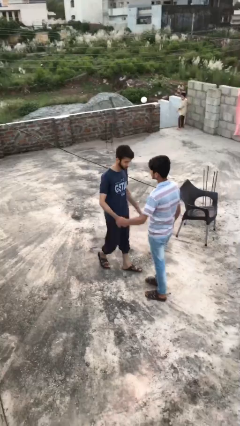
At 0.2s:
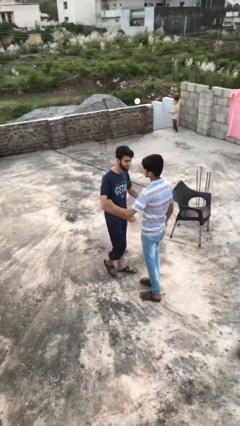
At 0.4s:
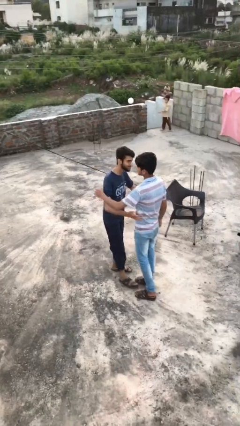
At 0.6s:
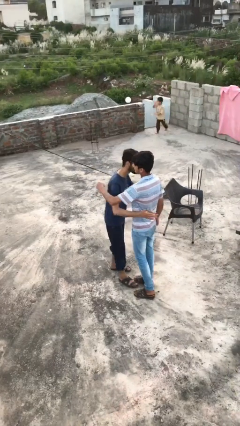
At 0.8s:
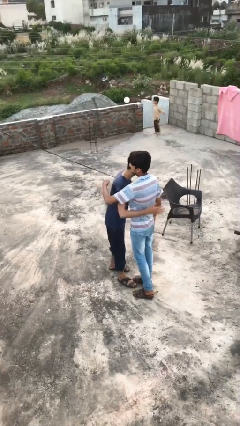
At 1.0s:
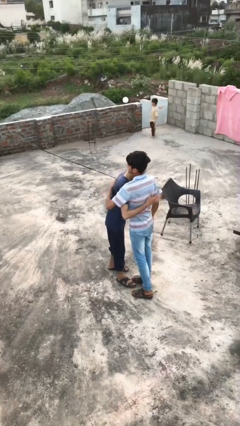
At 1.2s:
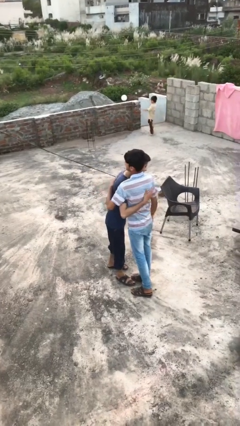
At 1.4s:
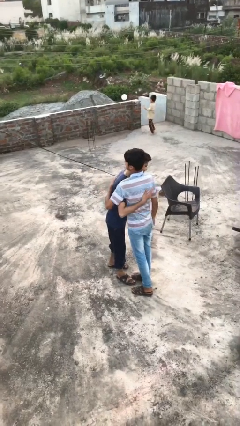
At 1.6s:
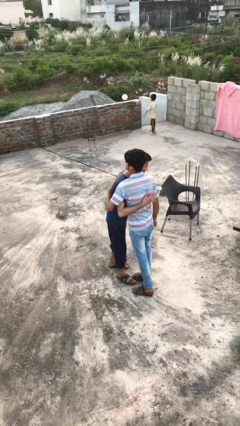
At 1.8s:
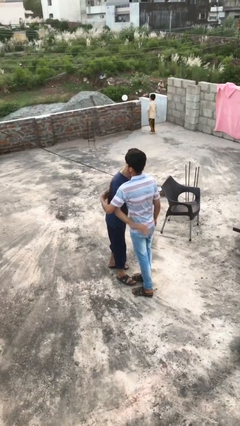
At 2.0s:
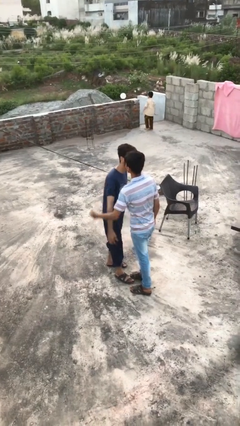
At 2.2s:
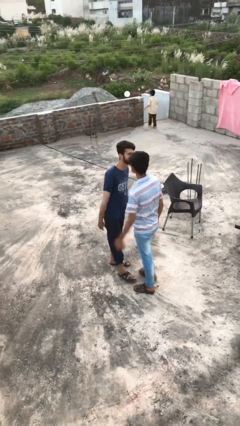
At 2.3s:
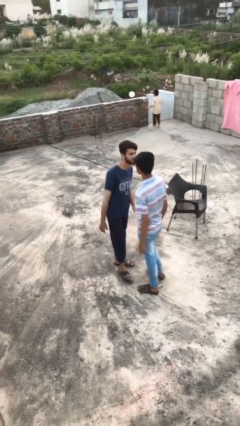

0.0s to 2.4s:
person embraces person

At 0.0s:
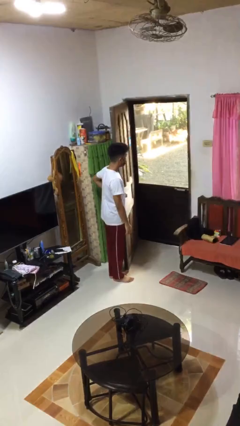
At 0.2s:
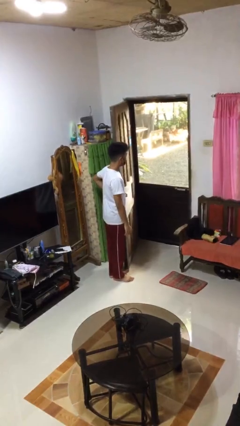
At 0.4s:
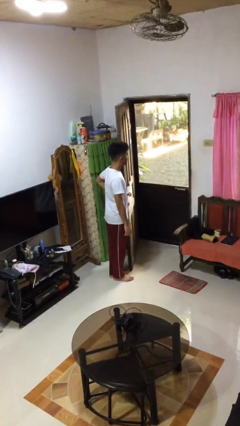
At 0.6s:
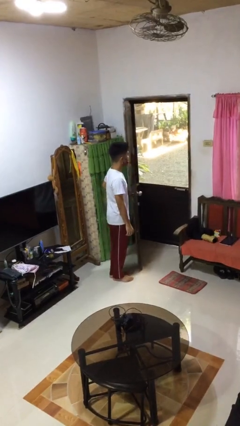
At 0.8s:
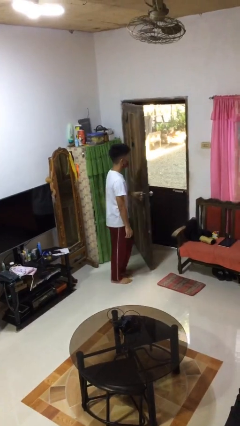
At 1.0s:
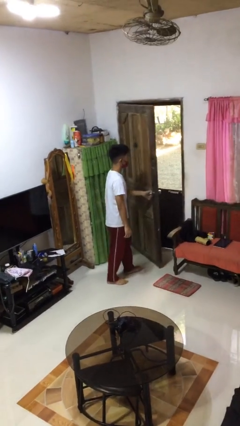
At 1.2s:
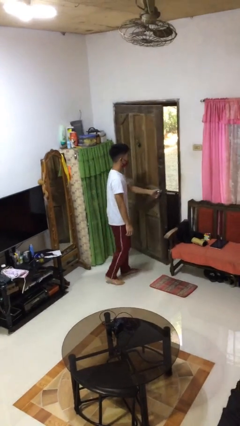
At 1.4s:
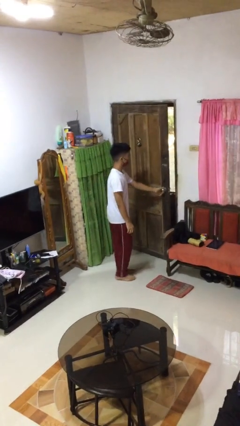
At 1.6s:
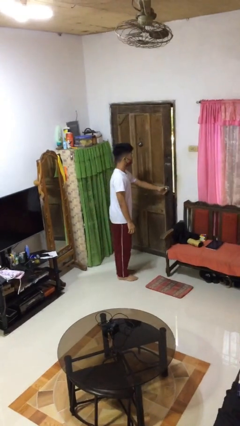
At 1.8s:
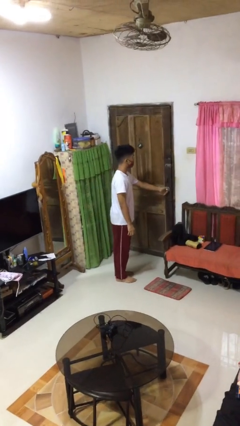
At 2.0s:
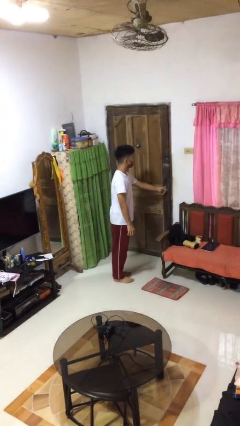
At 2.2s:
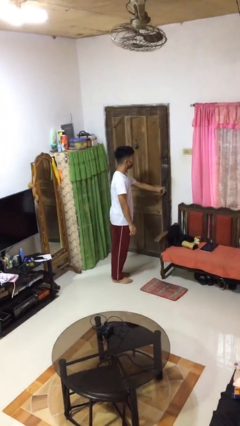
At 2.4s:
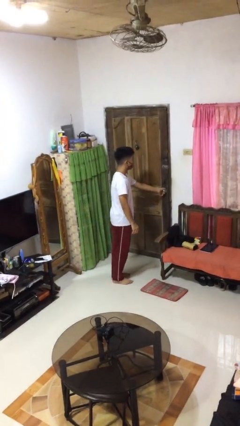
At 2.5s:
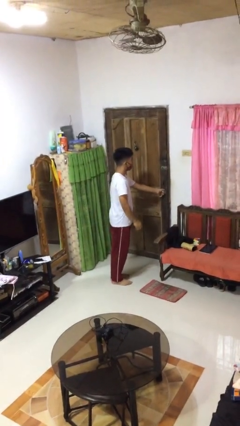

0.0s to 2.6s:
person closes facility door

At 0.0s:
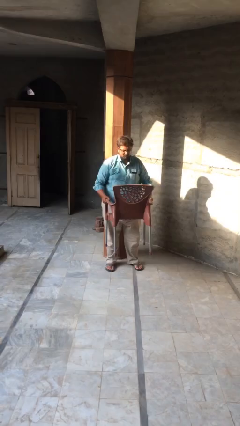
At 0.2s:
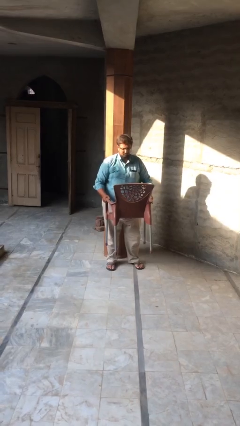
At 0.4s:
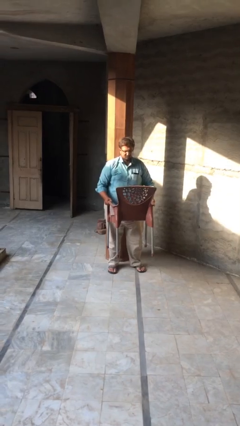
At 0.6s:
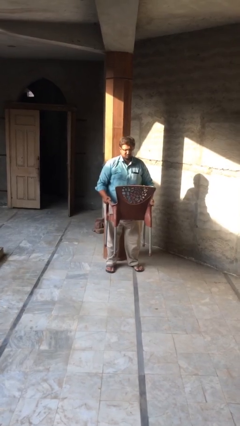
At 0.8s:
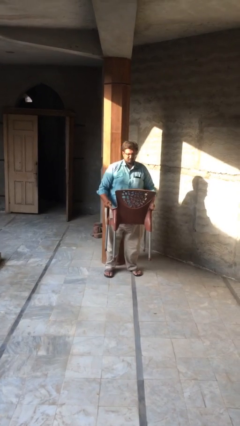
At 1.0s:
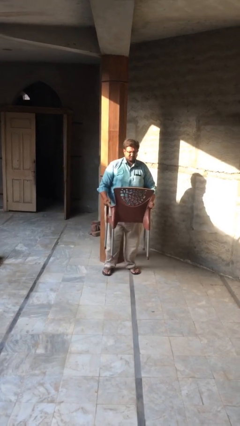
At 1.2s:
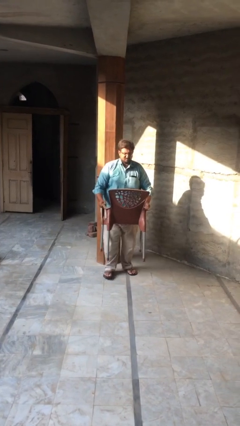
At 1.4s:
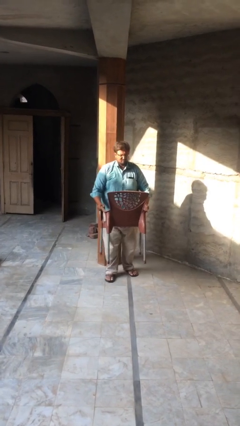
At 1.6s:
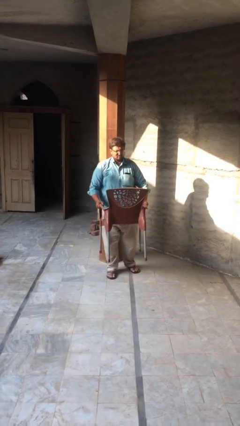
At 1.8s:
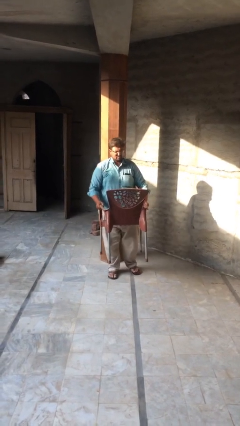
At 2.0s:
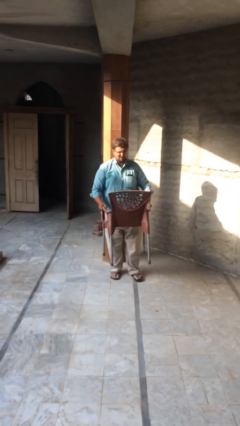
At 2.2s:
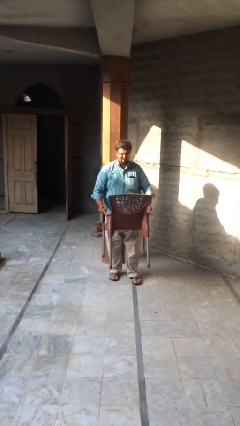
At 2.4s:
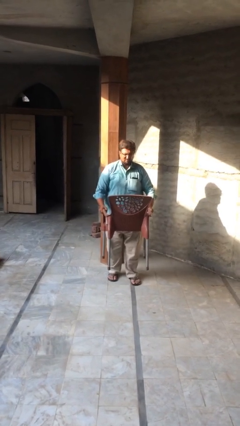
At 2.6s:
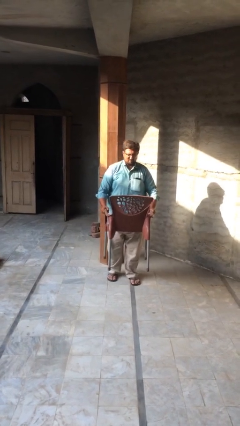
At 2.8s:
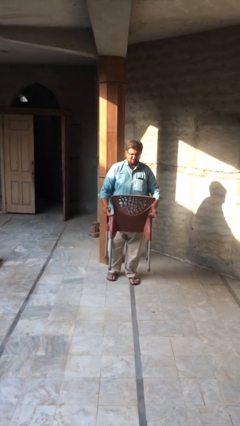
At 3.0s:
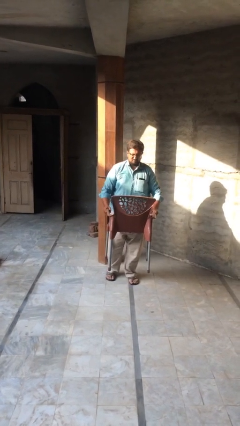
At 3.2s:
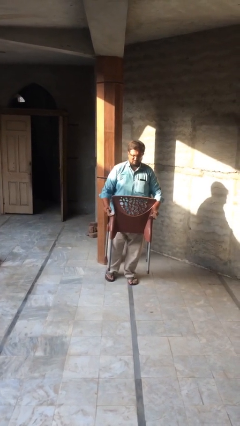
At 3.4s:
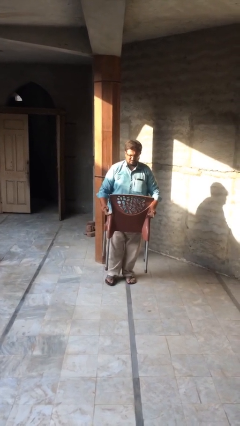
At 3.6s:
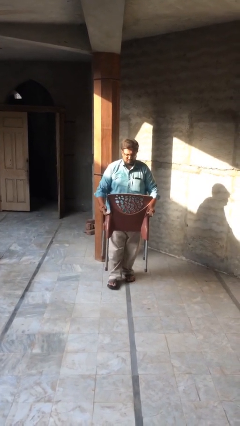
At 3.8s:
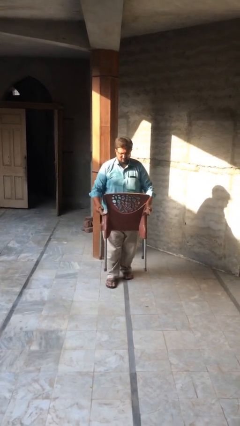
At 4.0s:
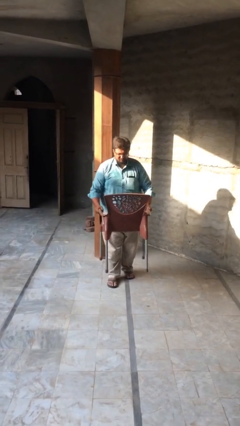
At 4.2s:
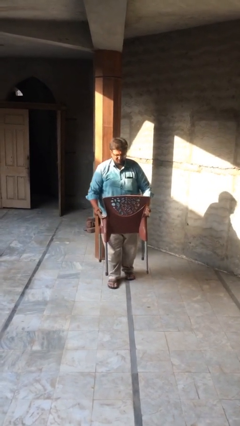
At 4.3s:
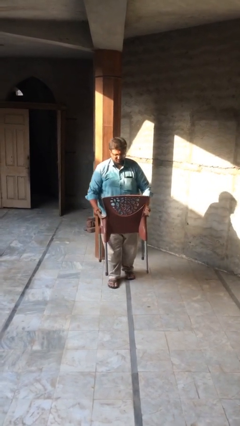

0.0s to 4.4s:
person carries heavy object

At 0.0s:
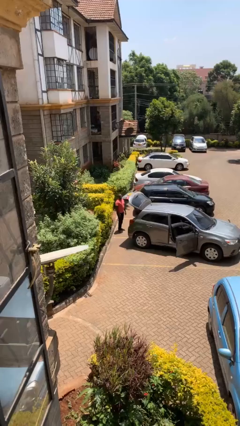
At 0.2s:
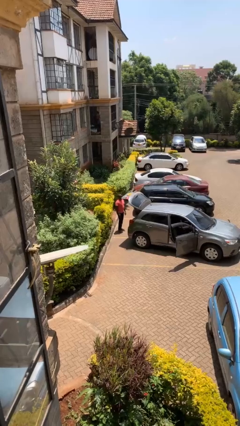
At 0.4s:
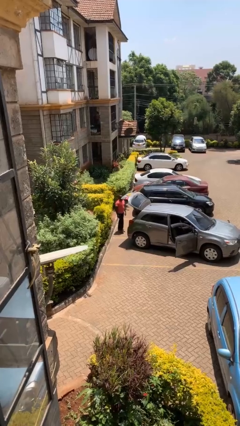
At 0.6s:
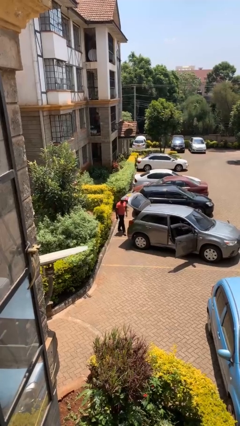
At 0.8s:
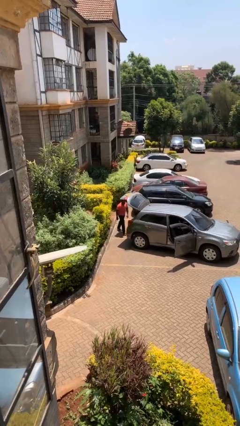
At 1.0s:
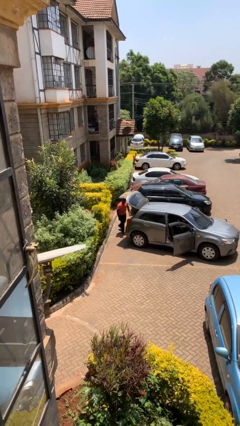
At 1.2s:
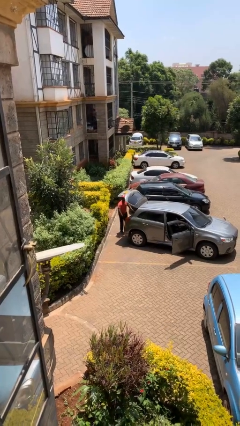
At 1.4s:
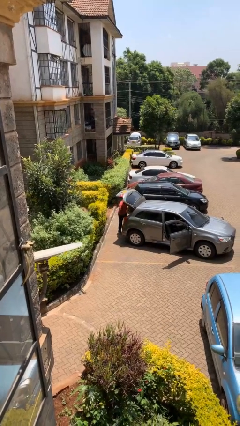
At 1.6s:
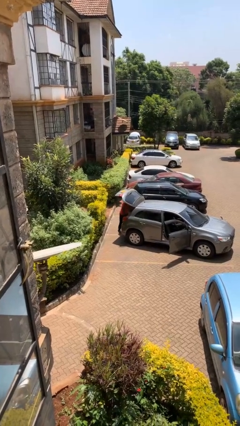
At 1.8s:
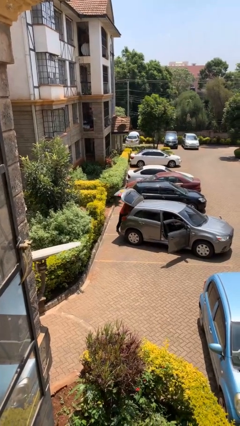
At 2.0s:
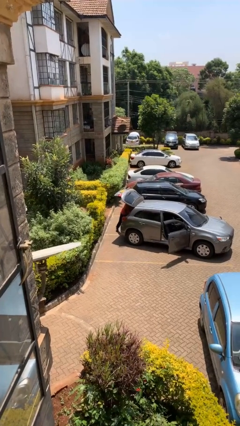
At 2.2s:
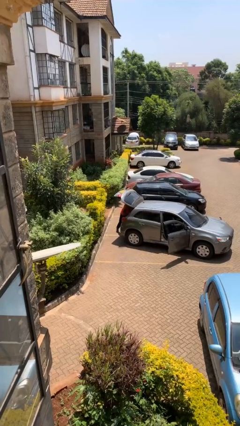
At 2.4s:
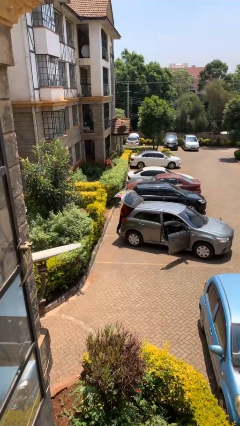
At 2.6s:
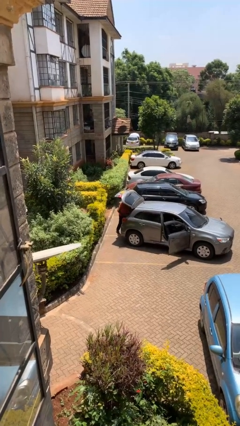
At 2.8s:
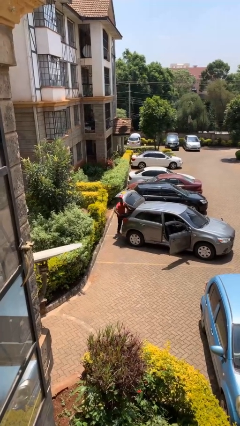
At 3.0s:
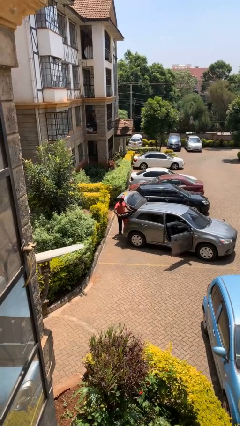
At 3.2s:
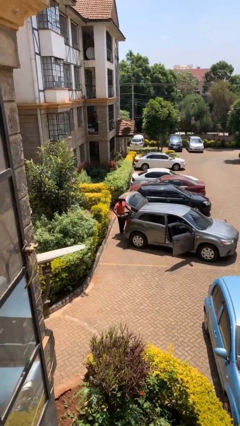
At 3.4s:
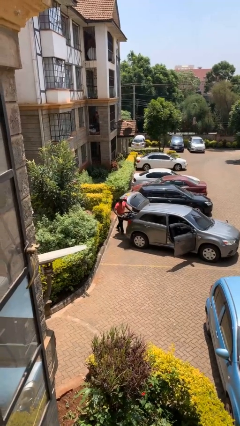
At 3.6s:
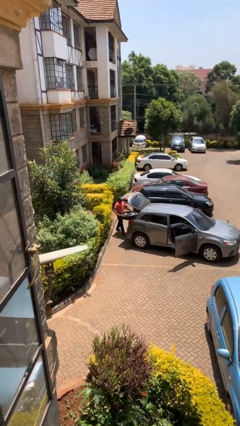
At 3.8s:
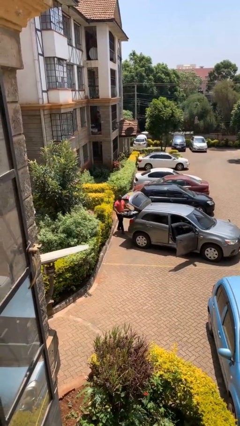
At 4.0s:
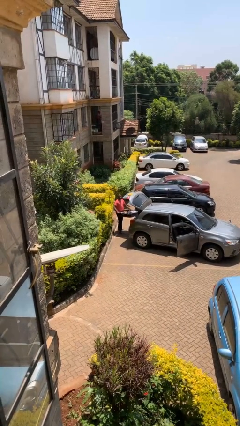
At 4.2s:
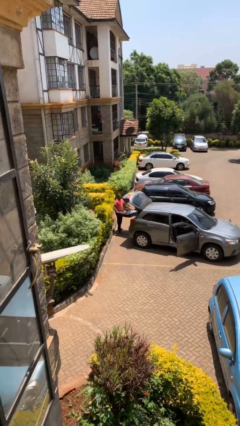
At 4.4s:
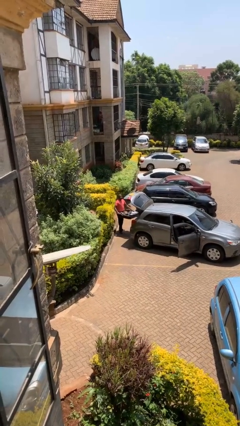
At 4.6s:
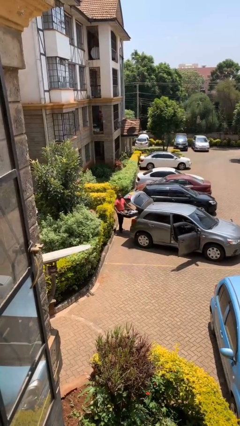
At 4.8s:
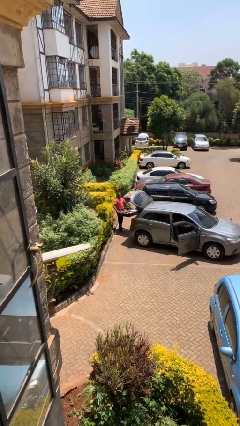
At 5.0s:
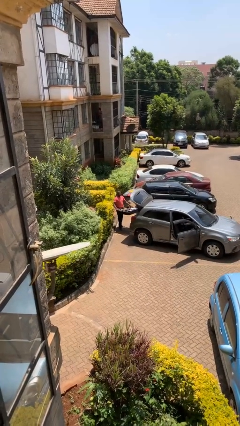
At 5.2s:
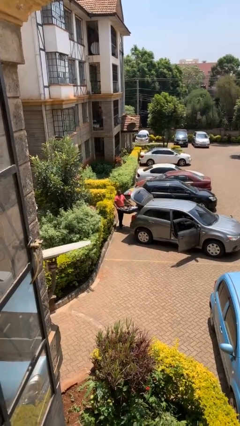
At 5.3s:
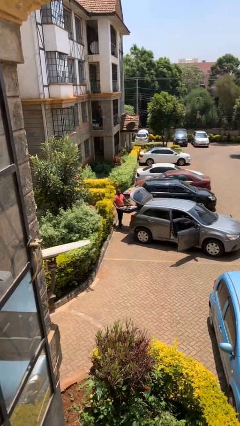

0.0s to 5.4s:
person unloads car

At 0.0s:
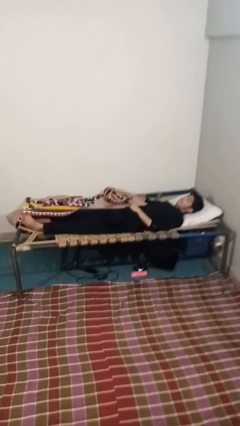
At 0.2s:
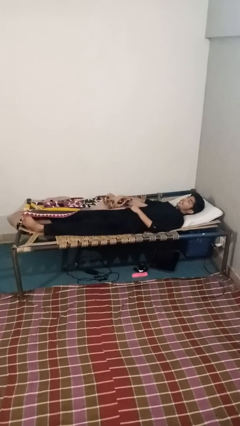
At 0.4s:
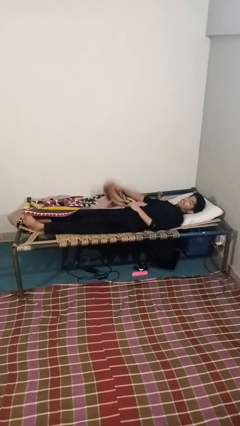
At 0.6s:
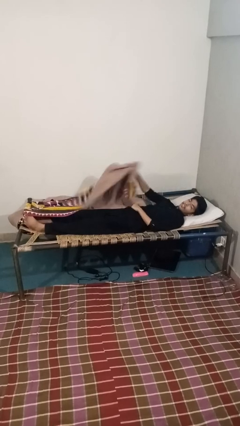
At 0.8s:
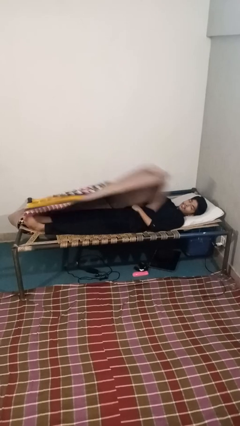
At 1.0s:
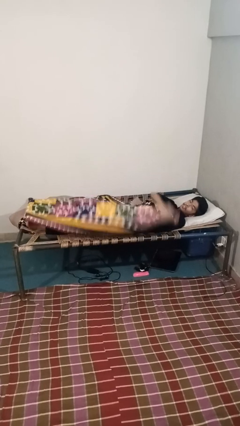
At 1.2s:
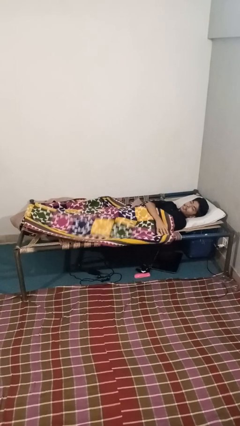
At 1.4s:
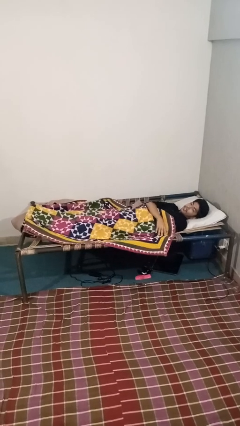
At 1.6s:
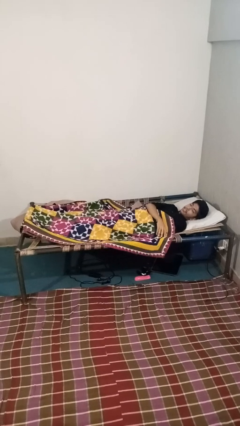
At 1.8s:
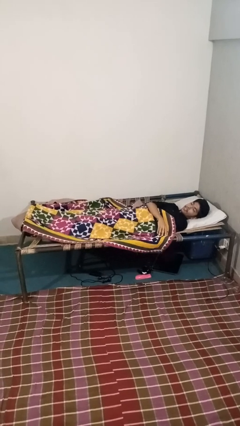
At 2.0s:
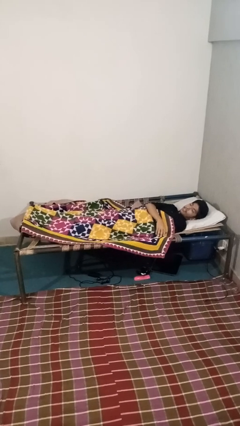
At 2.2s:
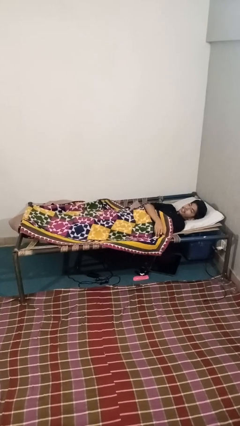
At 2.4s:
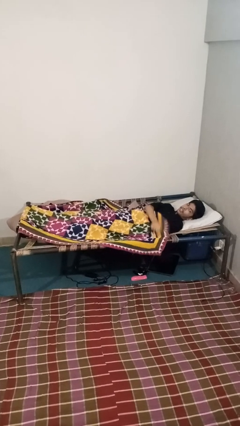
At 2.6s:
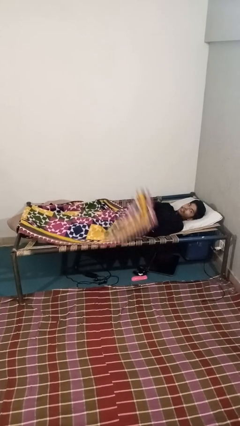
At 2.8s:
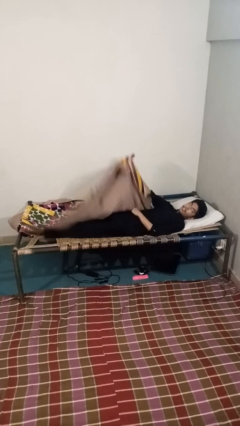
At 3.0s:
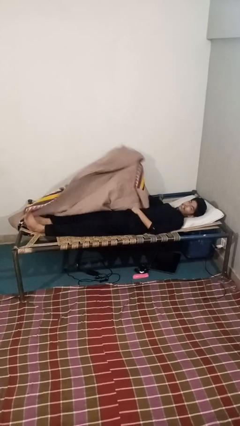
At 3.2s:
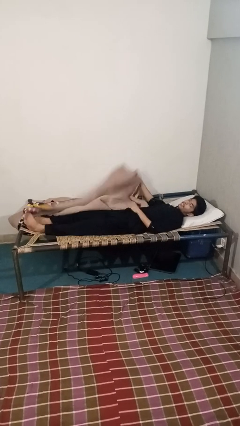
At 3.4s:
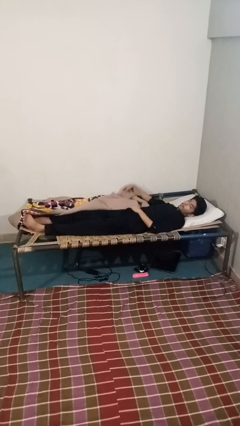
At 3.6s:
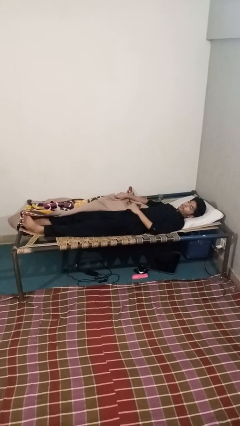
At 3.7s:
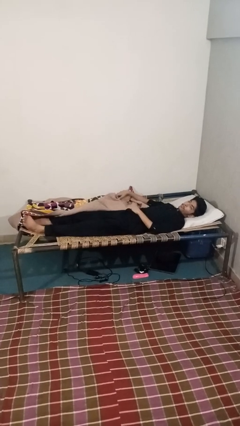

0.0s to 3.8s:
person covers with bedsheets
